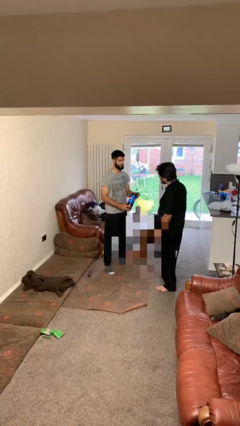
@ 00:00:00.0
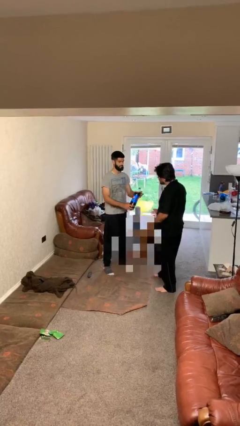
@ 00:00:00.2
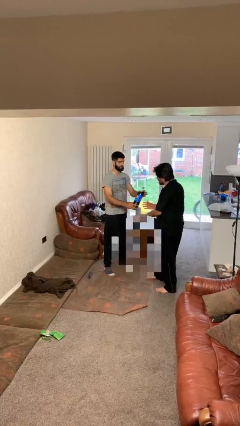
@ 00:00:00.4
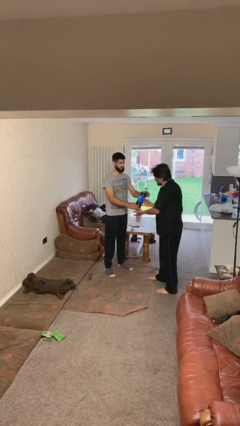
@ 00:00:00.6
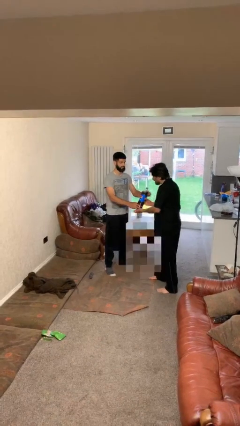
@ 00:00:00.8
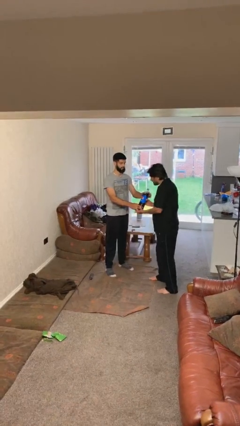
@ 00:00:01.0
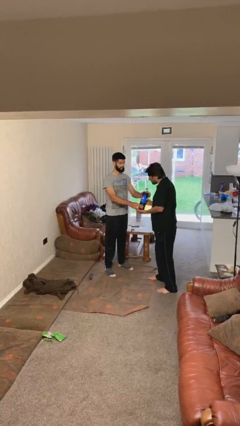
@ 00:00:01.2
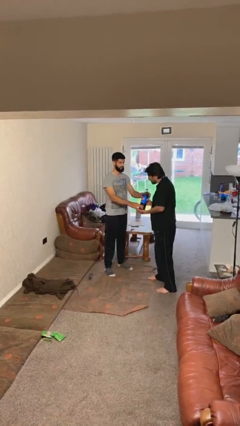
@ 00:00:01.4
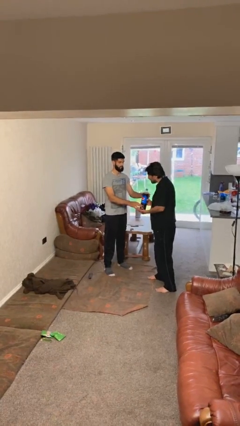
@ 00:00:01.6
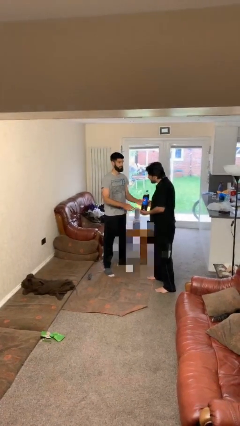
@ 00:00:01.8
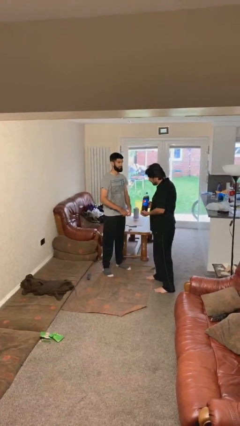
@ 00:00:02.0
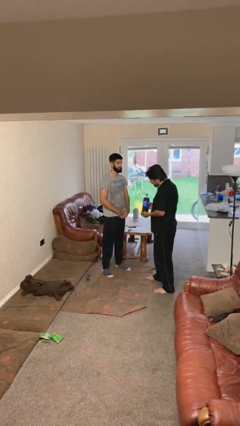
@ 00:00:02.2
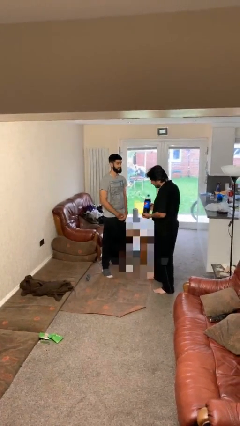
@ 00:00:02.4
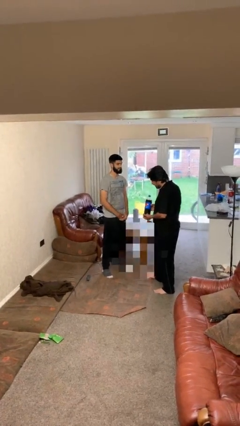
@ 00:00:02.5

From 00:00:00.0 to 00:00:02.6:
person transfers object to person

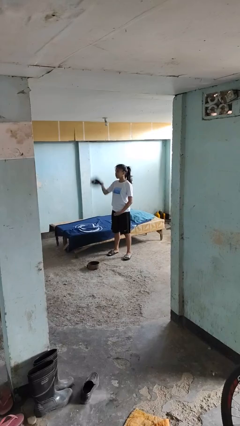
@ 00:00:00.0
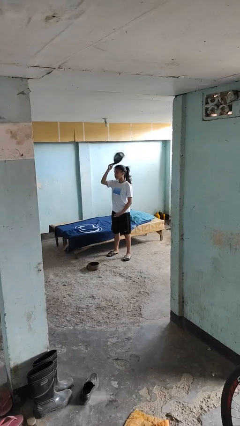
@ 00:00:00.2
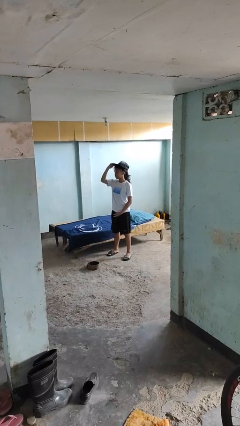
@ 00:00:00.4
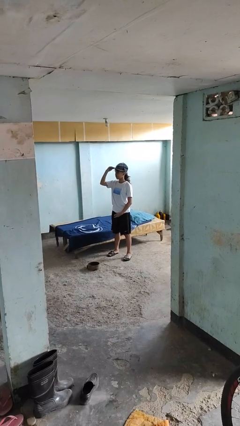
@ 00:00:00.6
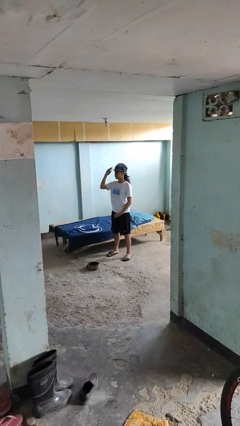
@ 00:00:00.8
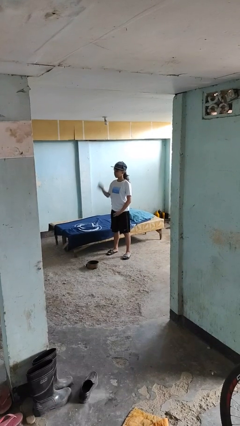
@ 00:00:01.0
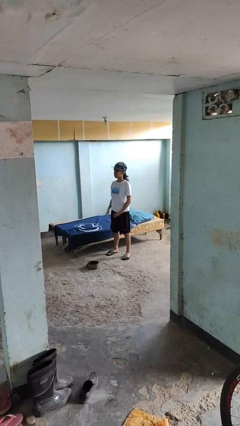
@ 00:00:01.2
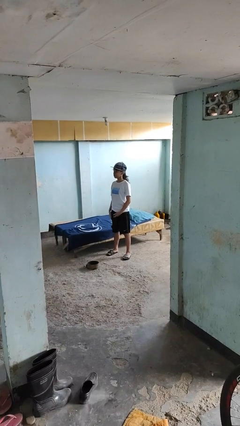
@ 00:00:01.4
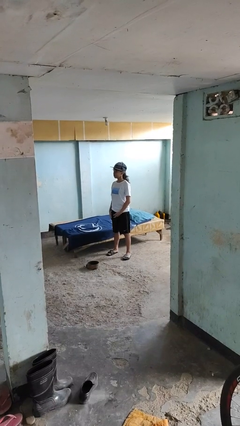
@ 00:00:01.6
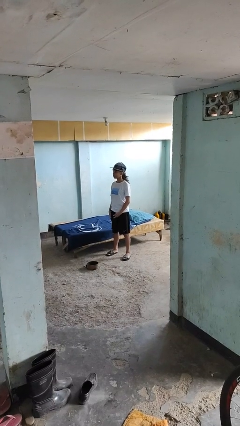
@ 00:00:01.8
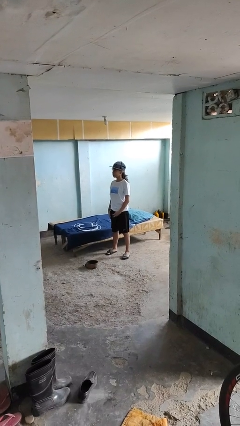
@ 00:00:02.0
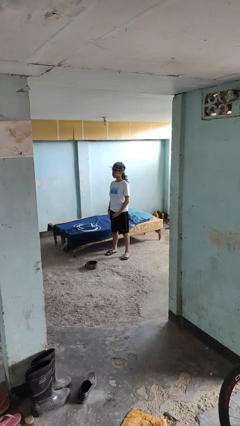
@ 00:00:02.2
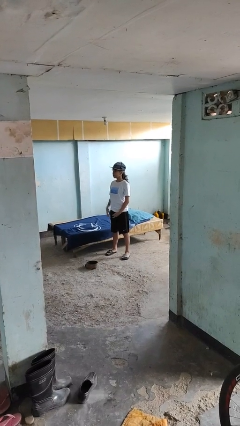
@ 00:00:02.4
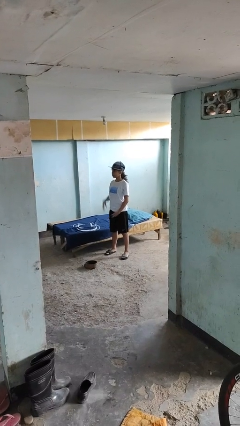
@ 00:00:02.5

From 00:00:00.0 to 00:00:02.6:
person puts on hat

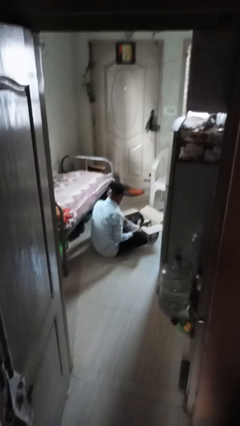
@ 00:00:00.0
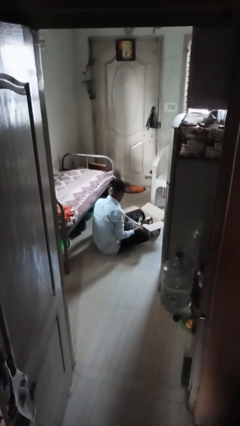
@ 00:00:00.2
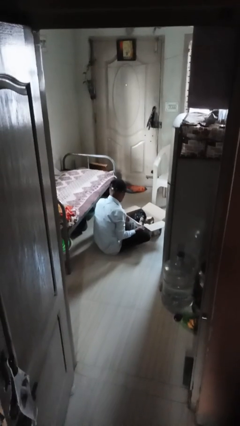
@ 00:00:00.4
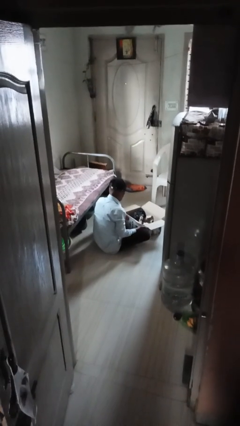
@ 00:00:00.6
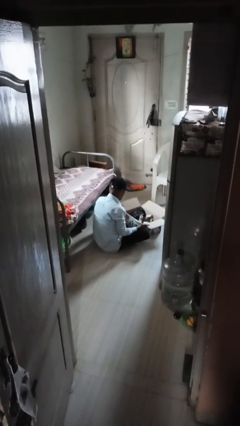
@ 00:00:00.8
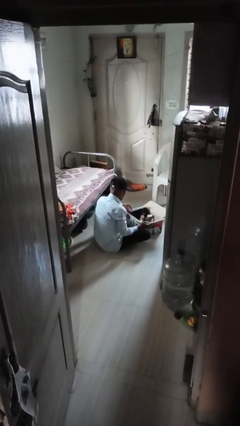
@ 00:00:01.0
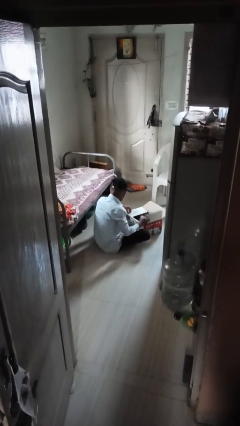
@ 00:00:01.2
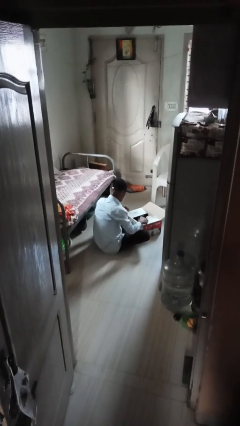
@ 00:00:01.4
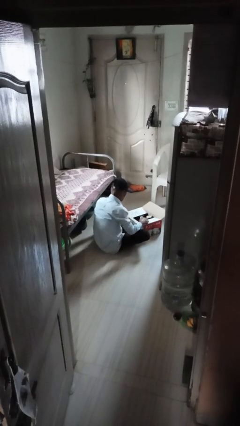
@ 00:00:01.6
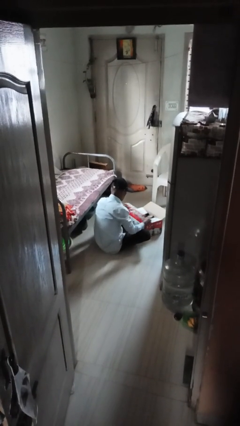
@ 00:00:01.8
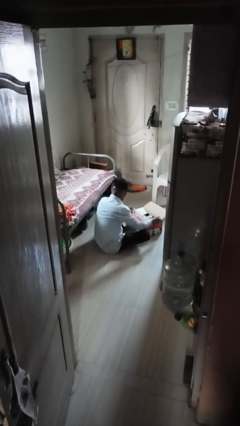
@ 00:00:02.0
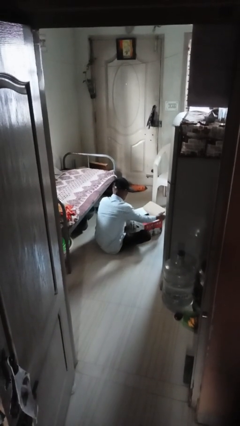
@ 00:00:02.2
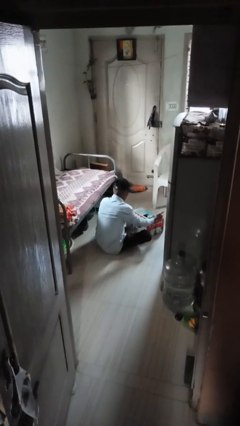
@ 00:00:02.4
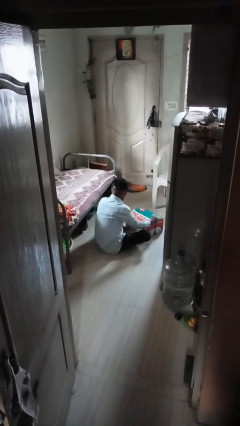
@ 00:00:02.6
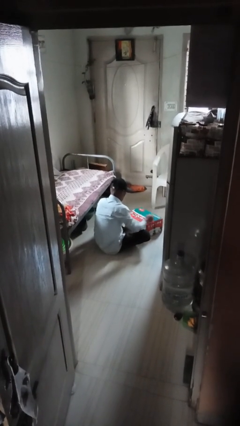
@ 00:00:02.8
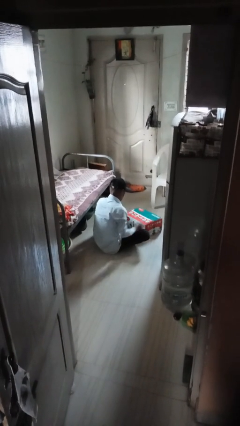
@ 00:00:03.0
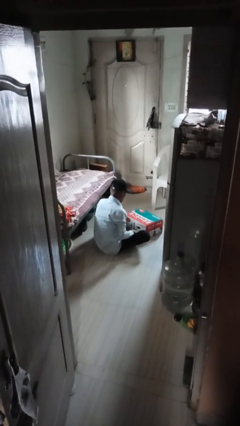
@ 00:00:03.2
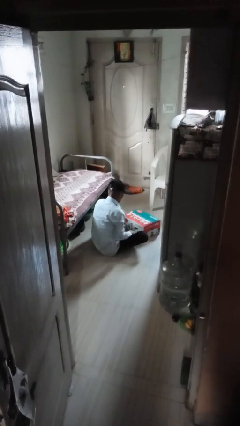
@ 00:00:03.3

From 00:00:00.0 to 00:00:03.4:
person closes box

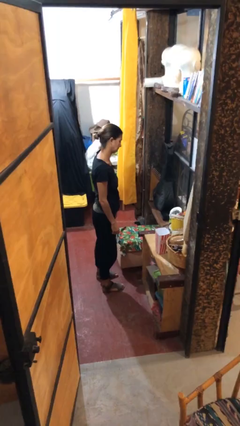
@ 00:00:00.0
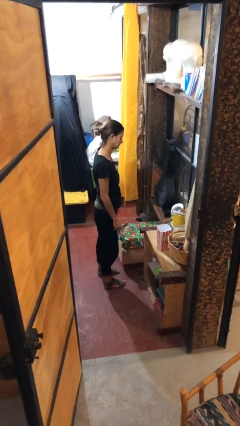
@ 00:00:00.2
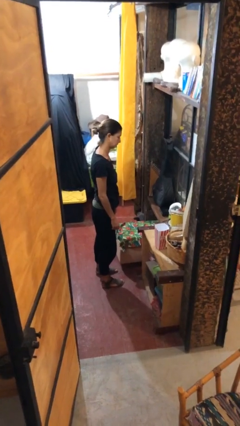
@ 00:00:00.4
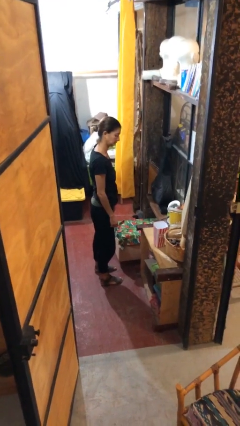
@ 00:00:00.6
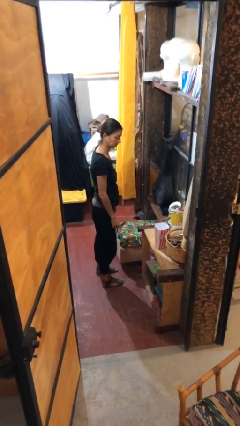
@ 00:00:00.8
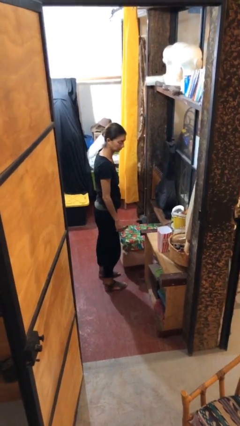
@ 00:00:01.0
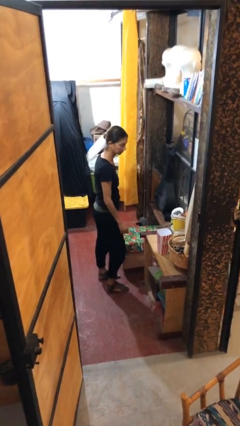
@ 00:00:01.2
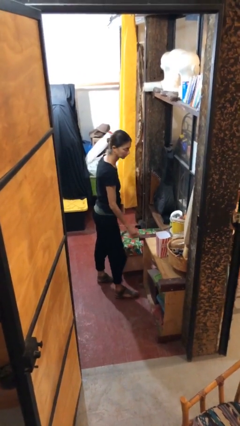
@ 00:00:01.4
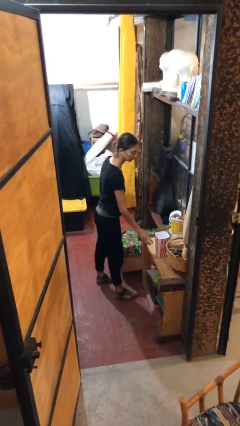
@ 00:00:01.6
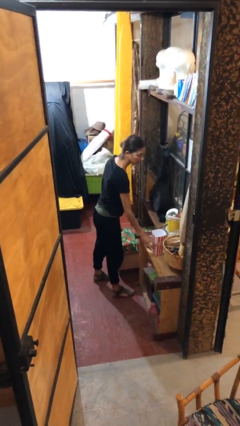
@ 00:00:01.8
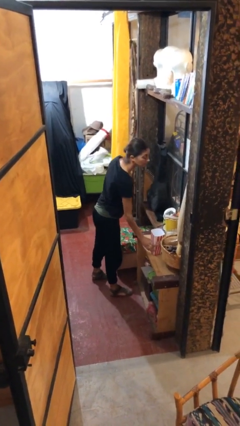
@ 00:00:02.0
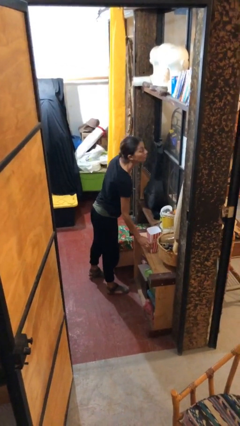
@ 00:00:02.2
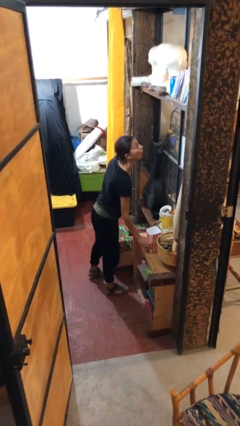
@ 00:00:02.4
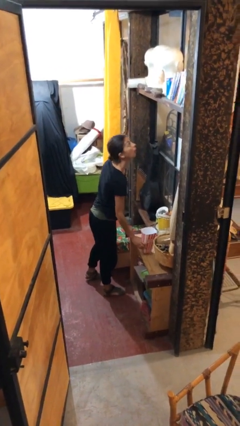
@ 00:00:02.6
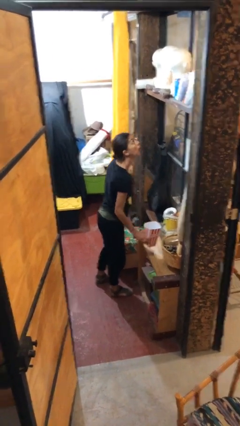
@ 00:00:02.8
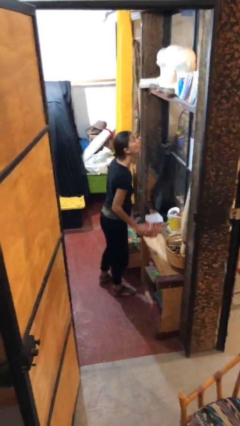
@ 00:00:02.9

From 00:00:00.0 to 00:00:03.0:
person picks up object from table

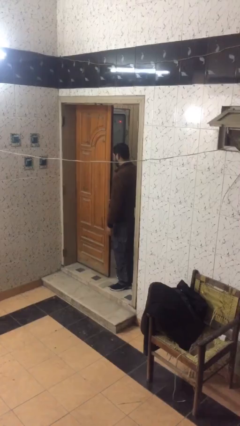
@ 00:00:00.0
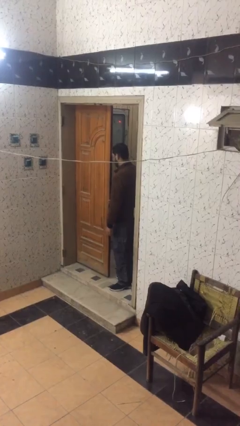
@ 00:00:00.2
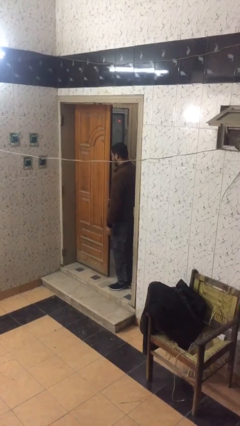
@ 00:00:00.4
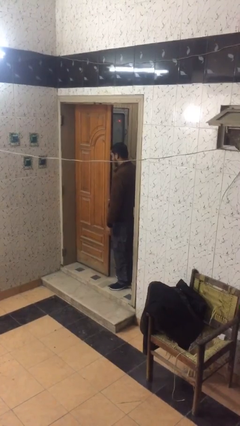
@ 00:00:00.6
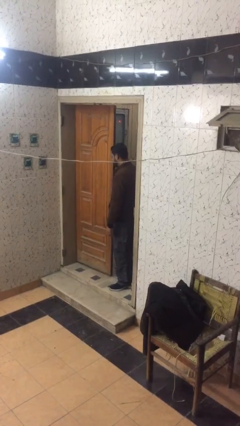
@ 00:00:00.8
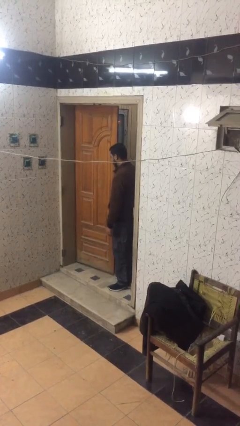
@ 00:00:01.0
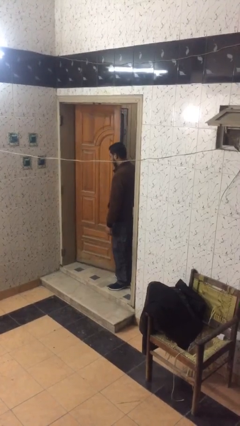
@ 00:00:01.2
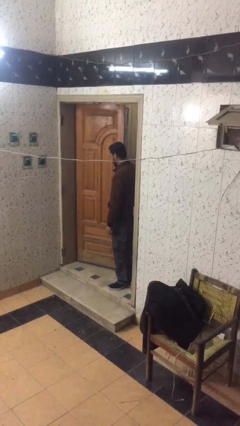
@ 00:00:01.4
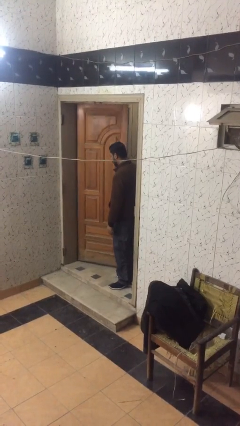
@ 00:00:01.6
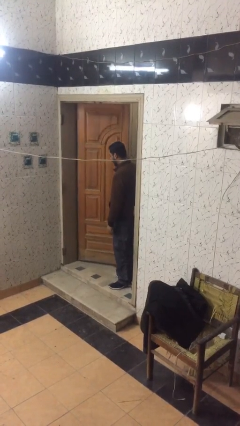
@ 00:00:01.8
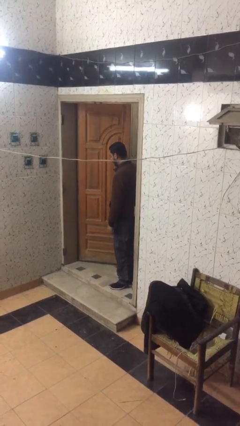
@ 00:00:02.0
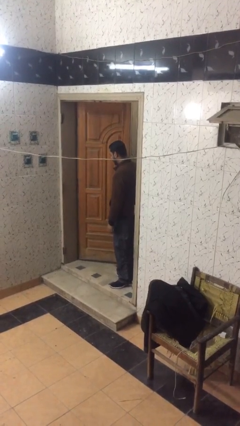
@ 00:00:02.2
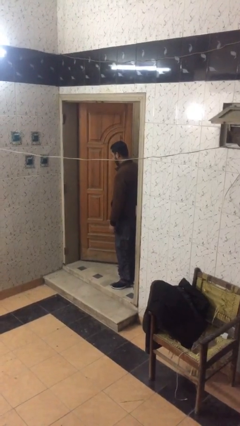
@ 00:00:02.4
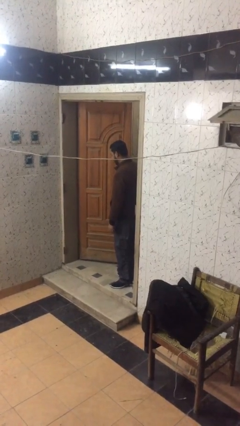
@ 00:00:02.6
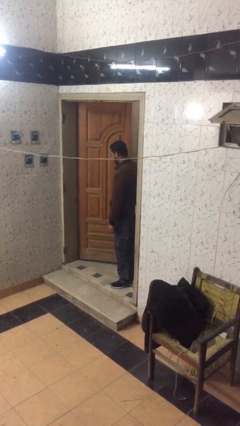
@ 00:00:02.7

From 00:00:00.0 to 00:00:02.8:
person opens facility door

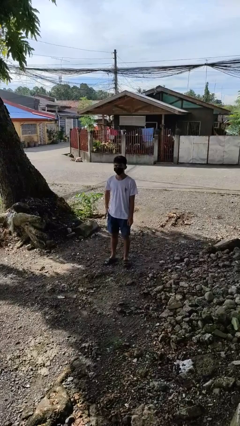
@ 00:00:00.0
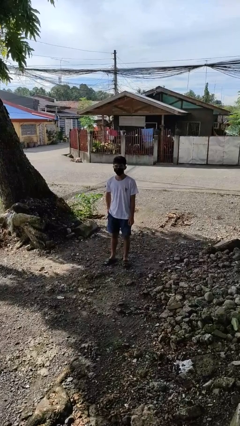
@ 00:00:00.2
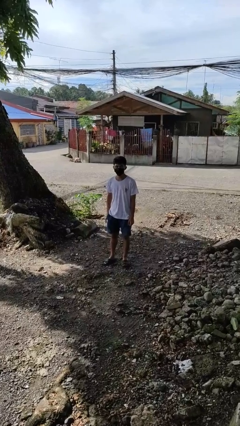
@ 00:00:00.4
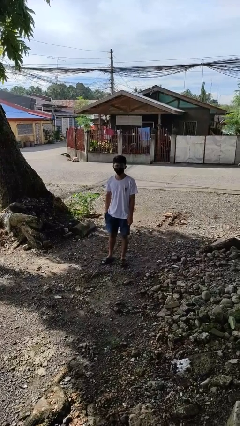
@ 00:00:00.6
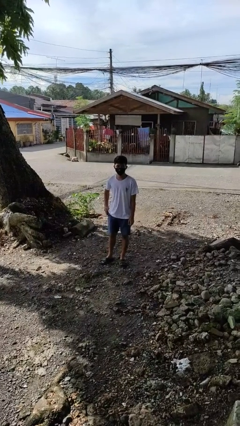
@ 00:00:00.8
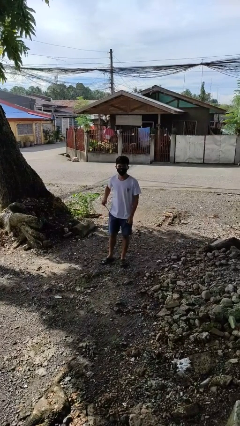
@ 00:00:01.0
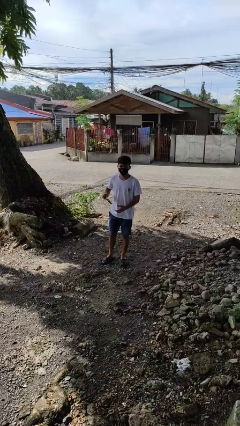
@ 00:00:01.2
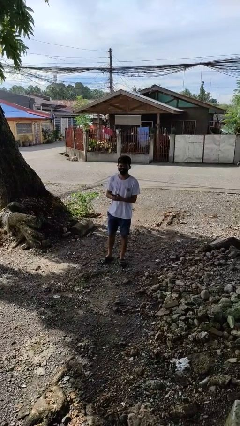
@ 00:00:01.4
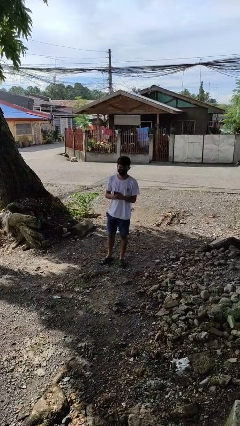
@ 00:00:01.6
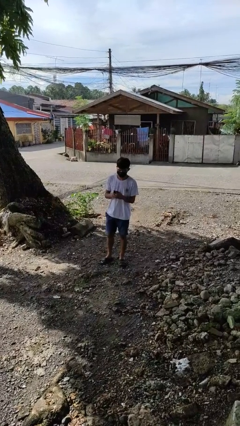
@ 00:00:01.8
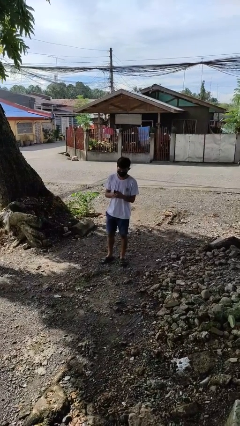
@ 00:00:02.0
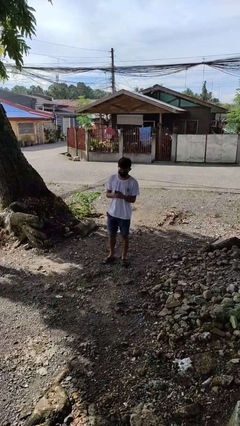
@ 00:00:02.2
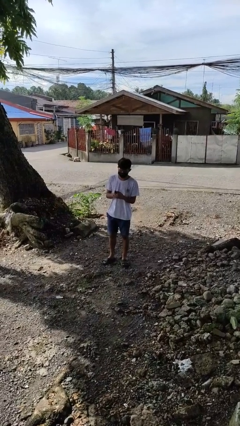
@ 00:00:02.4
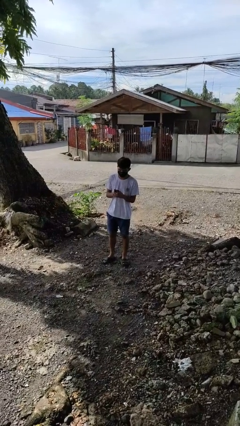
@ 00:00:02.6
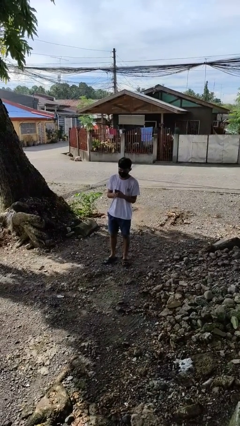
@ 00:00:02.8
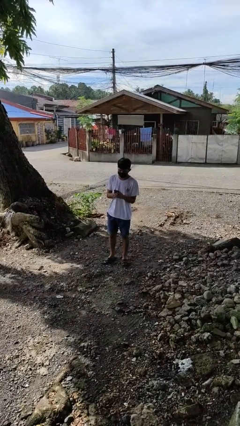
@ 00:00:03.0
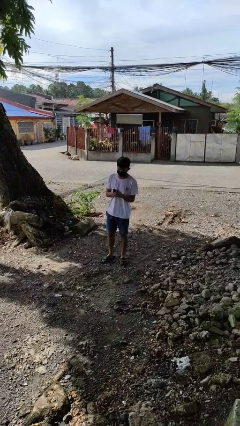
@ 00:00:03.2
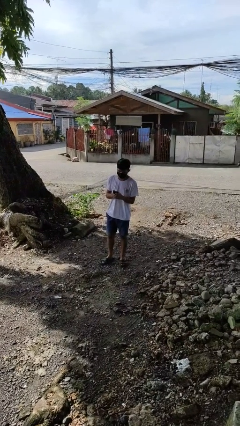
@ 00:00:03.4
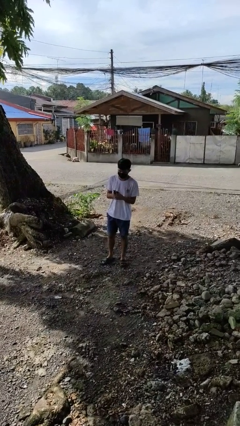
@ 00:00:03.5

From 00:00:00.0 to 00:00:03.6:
person takes phone from pocket
